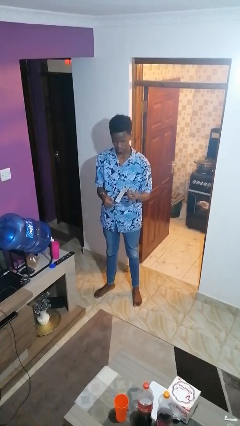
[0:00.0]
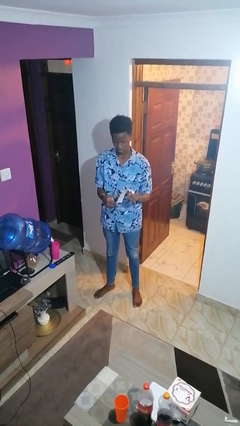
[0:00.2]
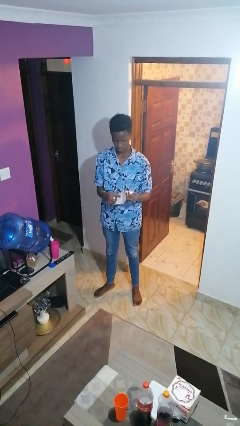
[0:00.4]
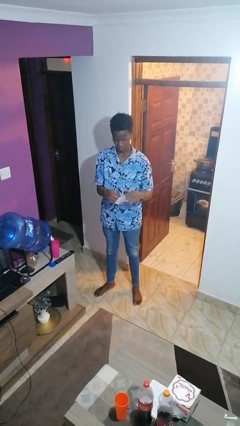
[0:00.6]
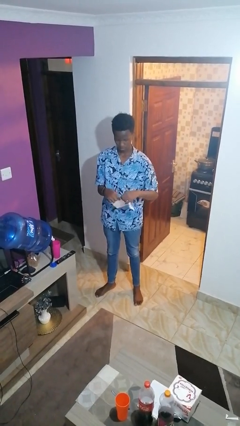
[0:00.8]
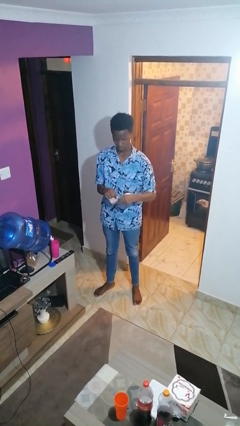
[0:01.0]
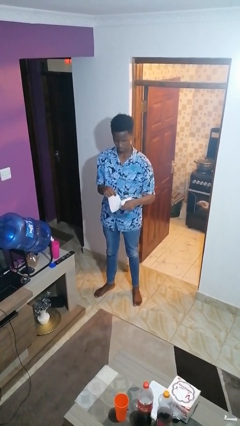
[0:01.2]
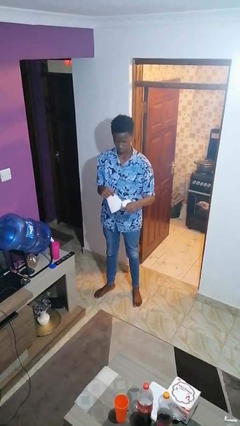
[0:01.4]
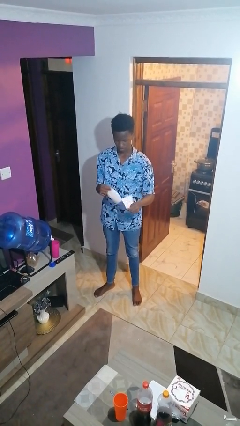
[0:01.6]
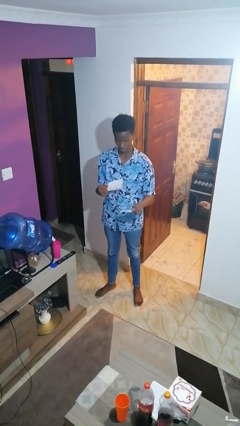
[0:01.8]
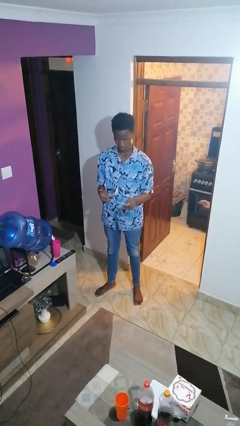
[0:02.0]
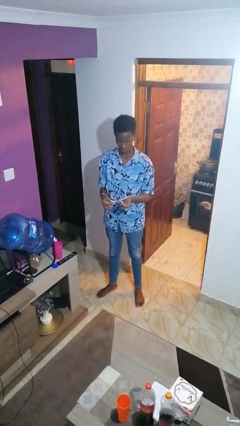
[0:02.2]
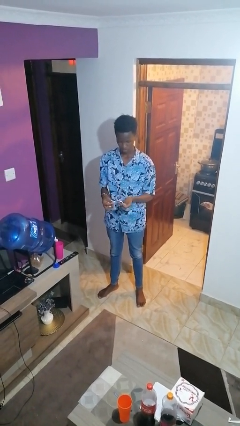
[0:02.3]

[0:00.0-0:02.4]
person tears paper

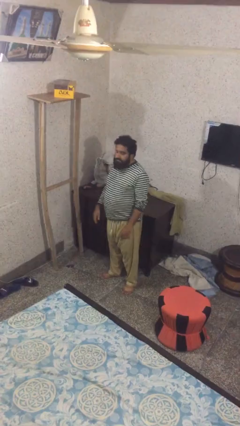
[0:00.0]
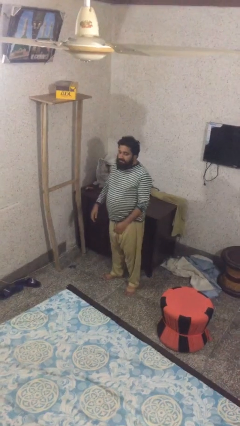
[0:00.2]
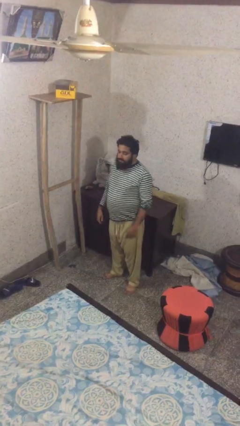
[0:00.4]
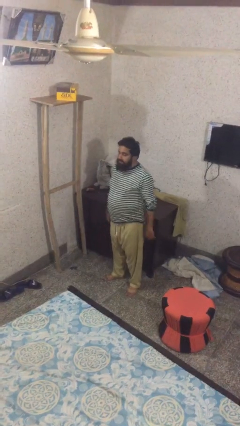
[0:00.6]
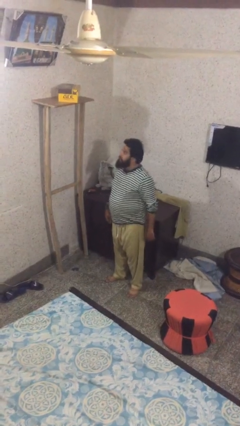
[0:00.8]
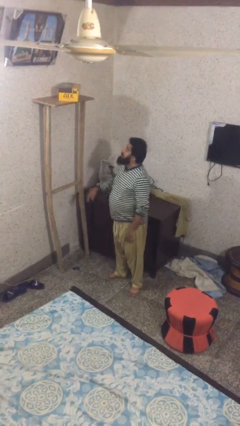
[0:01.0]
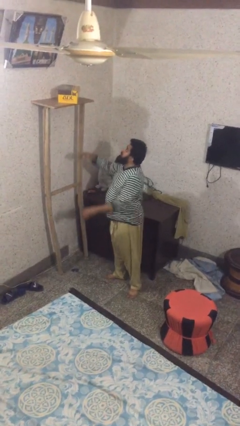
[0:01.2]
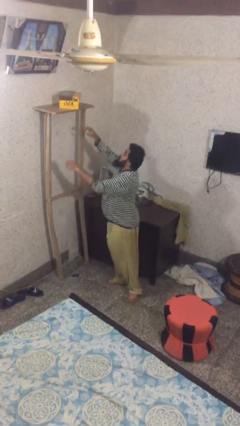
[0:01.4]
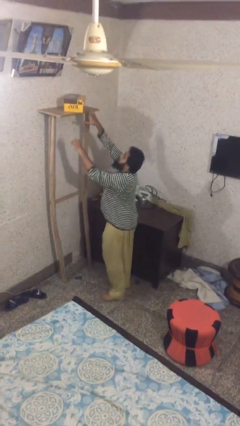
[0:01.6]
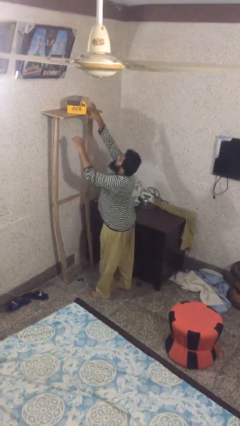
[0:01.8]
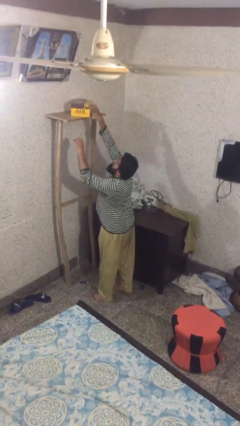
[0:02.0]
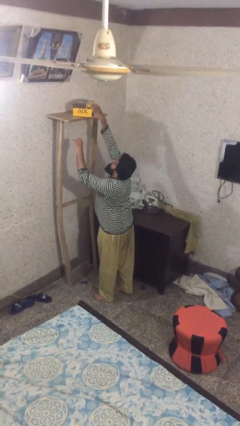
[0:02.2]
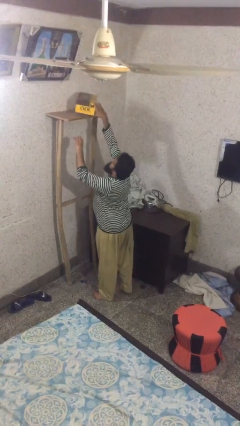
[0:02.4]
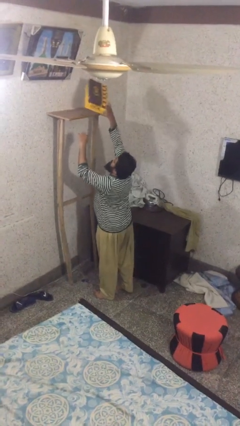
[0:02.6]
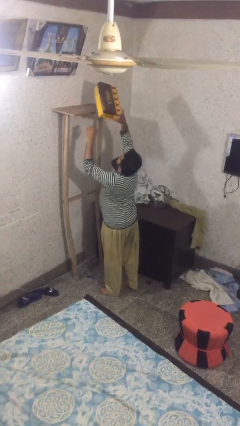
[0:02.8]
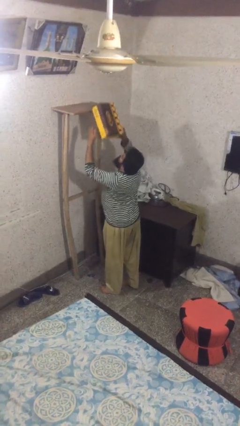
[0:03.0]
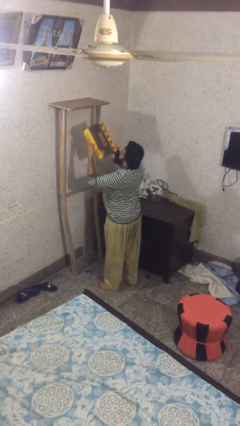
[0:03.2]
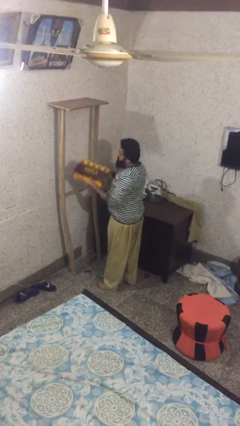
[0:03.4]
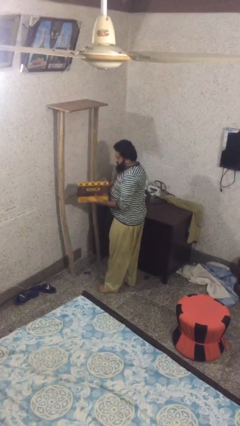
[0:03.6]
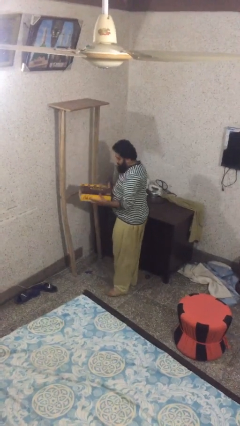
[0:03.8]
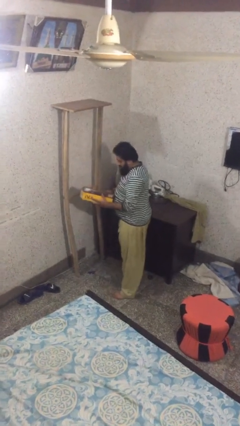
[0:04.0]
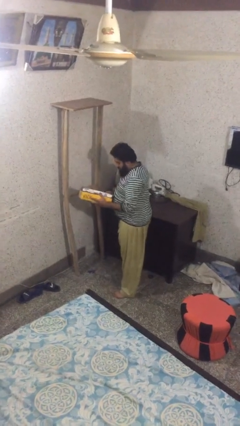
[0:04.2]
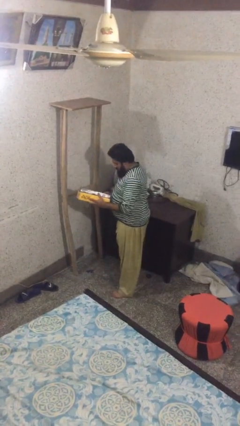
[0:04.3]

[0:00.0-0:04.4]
person picks up object from shelf

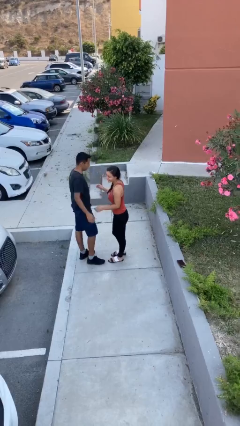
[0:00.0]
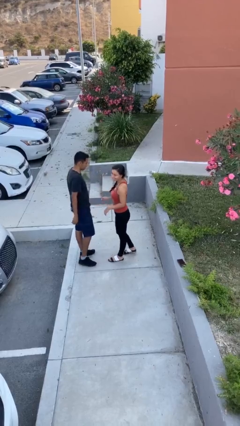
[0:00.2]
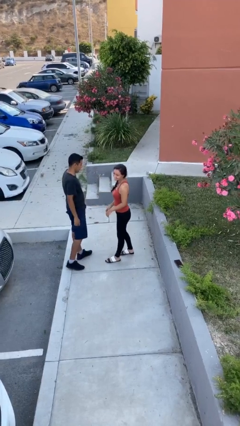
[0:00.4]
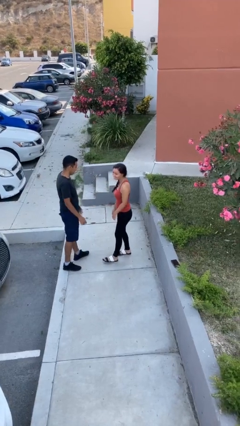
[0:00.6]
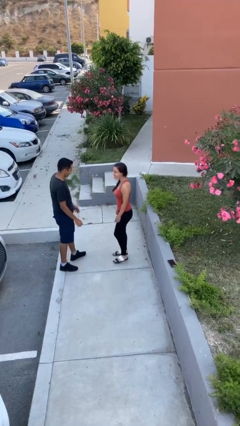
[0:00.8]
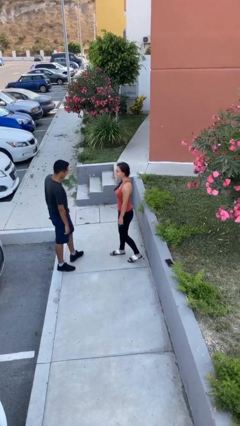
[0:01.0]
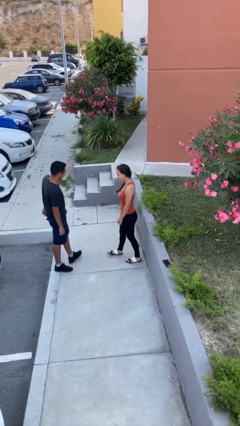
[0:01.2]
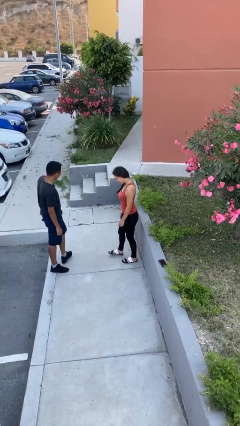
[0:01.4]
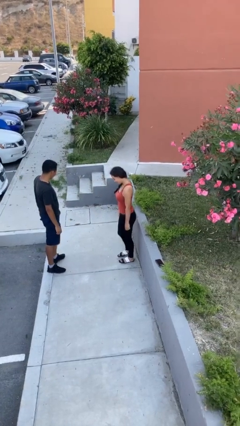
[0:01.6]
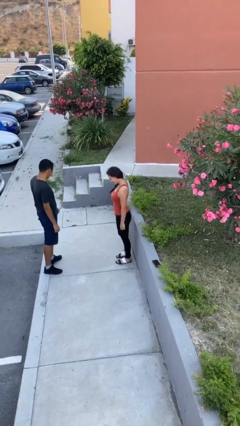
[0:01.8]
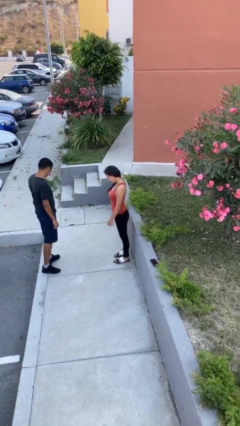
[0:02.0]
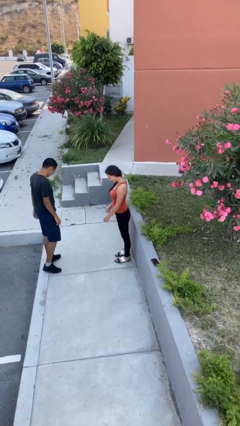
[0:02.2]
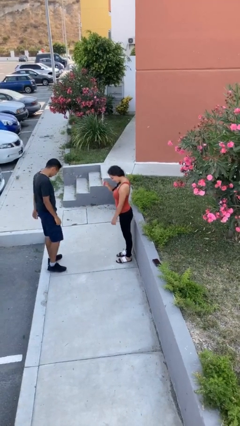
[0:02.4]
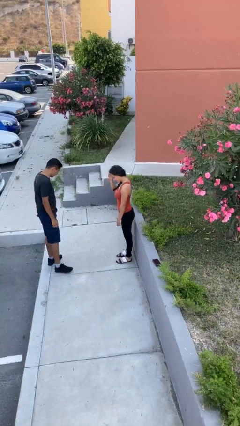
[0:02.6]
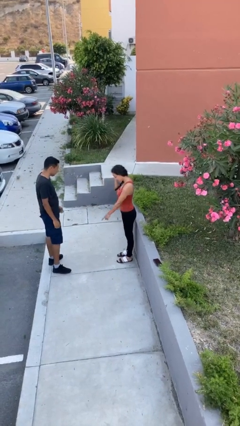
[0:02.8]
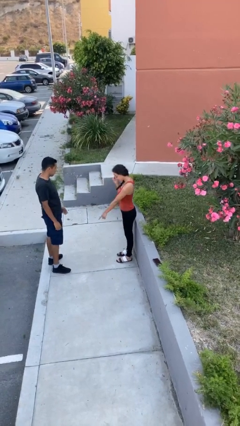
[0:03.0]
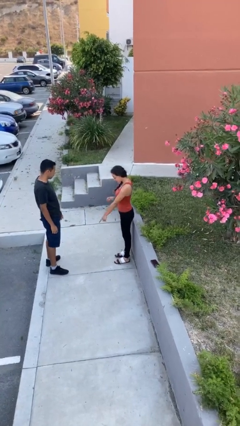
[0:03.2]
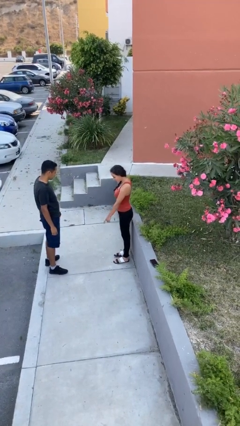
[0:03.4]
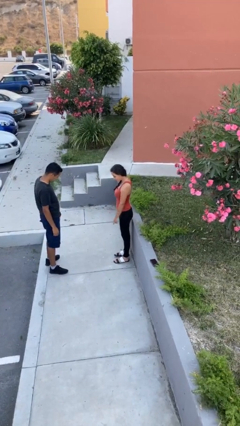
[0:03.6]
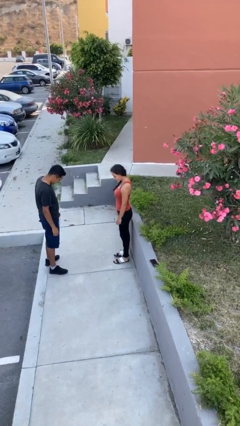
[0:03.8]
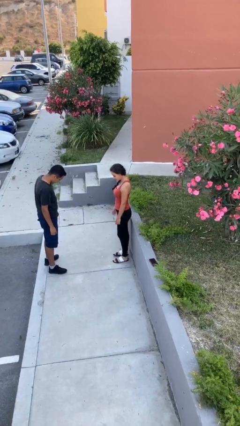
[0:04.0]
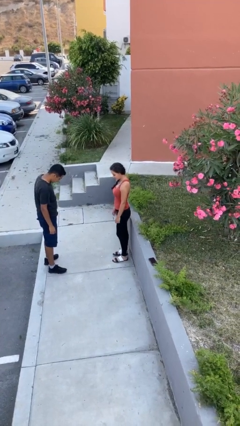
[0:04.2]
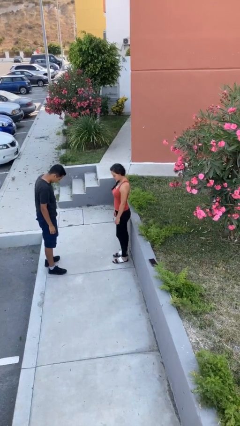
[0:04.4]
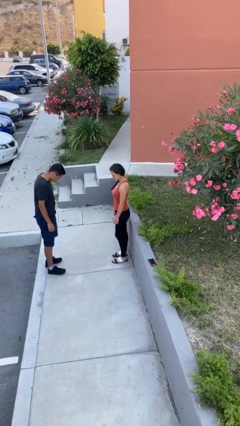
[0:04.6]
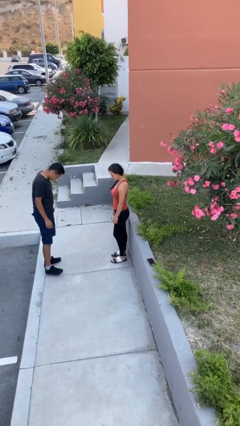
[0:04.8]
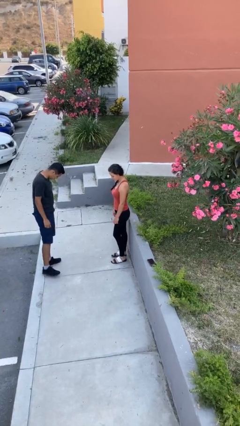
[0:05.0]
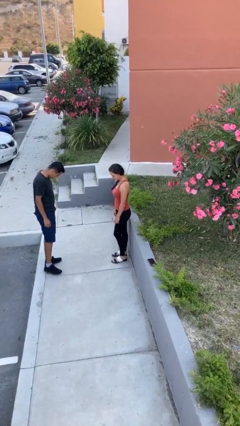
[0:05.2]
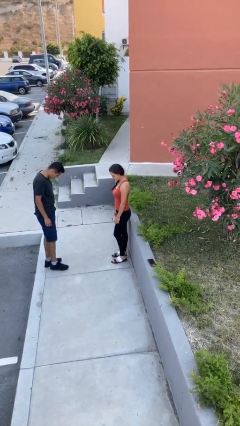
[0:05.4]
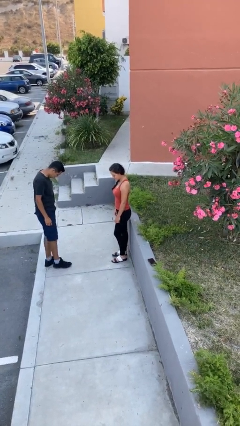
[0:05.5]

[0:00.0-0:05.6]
person talks to person

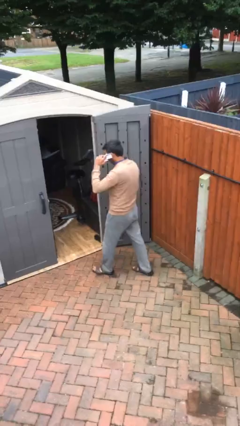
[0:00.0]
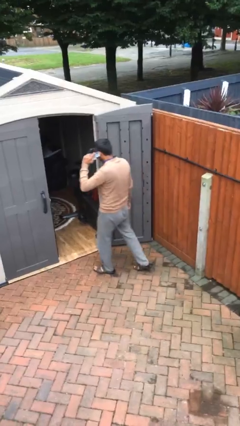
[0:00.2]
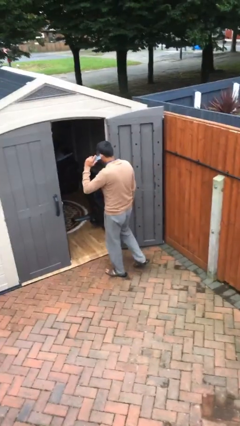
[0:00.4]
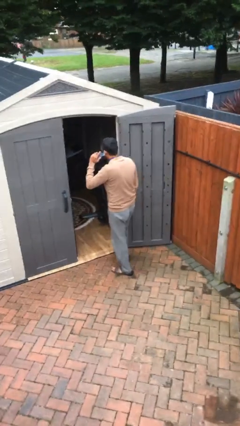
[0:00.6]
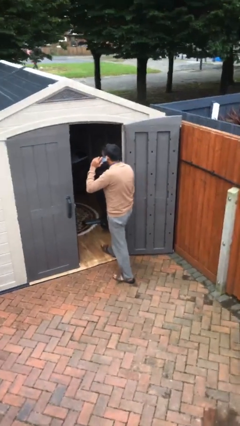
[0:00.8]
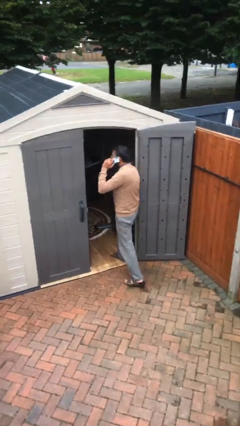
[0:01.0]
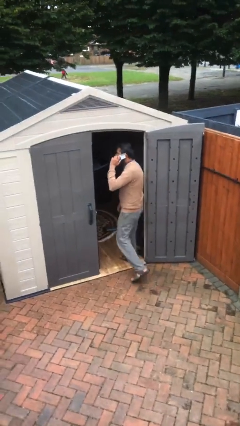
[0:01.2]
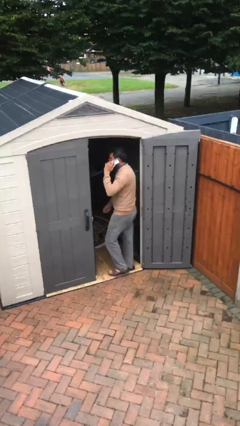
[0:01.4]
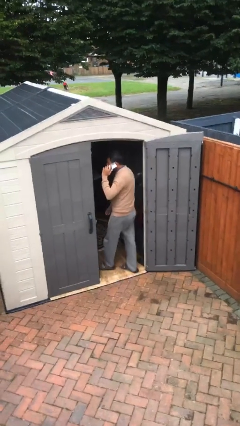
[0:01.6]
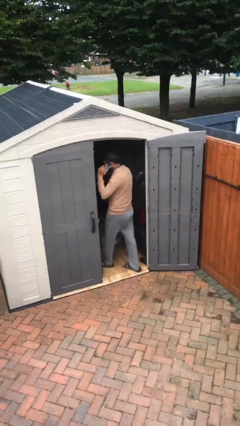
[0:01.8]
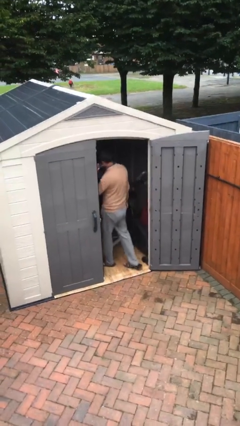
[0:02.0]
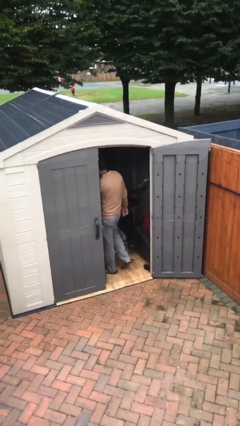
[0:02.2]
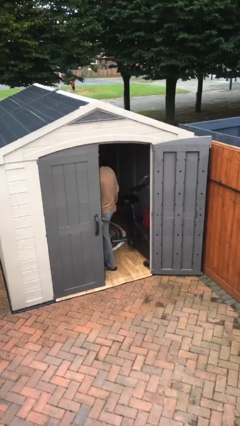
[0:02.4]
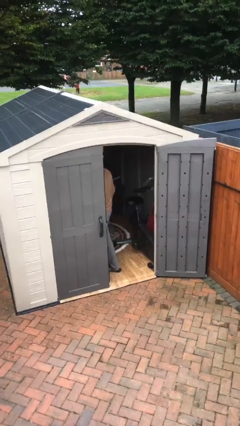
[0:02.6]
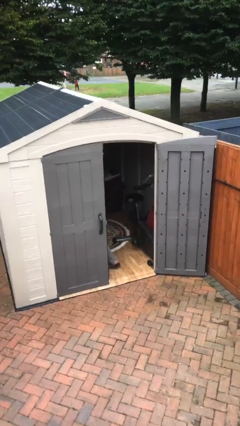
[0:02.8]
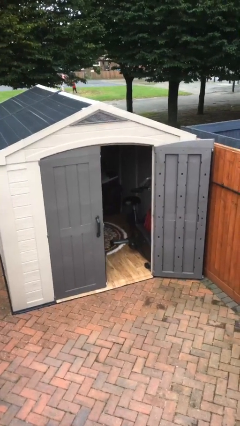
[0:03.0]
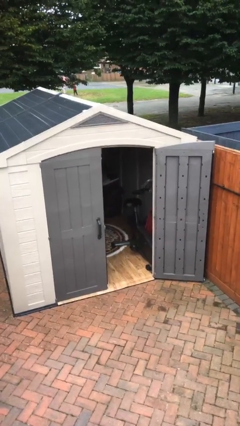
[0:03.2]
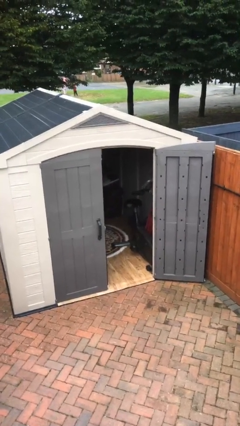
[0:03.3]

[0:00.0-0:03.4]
person exits scene through structure
